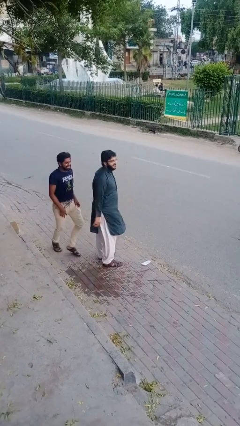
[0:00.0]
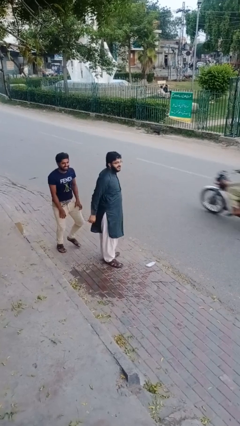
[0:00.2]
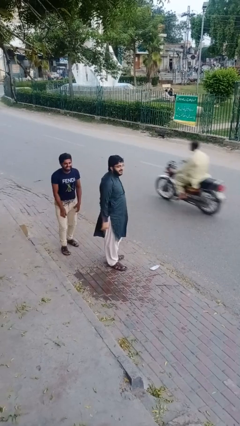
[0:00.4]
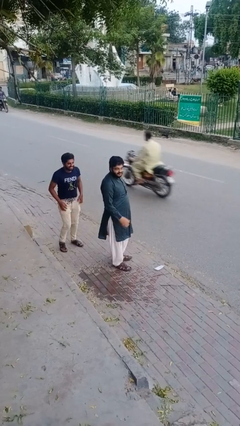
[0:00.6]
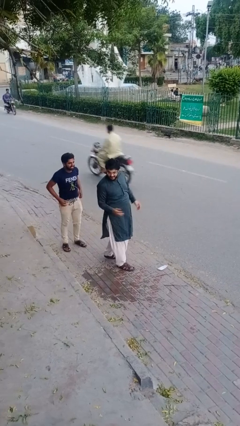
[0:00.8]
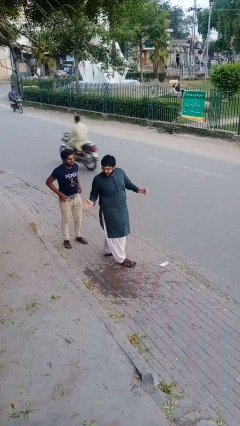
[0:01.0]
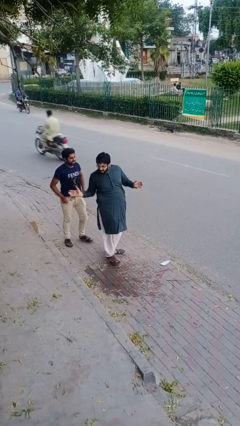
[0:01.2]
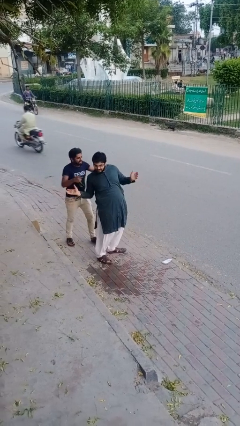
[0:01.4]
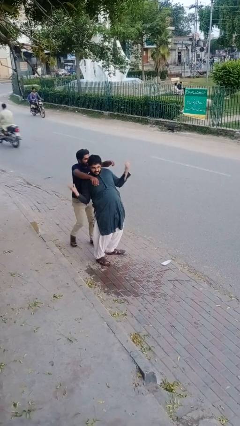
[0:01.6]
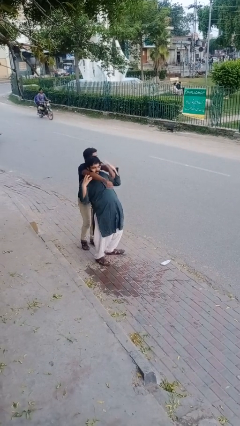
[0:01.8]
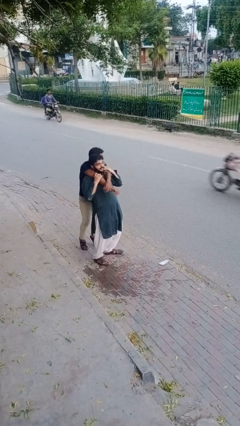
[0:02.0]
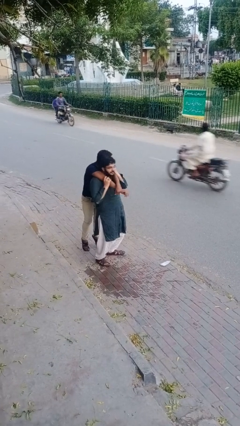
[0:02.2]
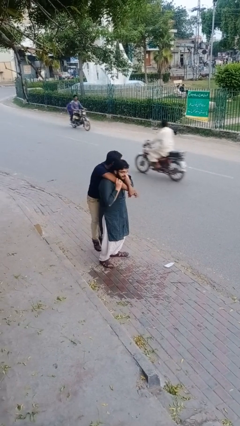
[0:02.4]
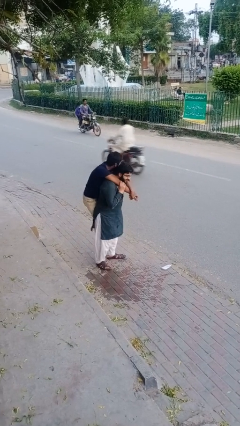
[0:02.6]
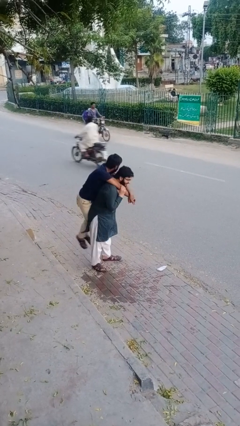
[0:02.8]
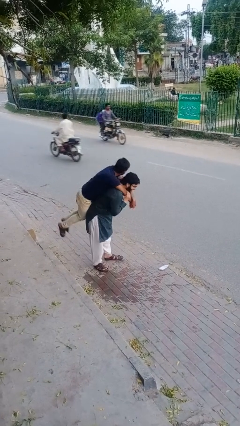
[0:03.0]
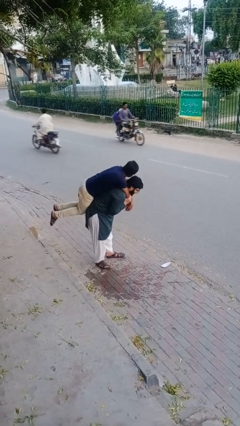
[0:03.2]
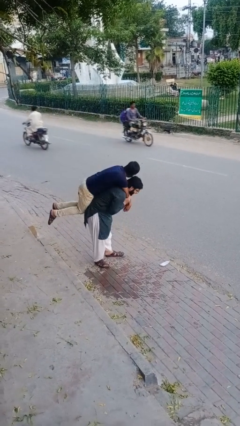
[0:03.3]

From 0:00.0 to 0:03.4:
person carries person over shoulder

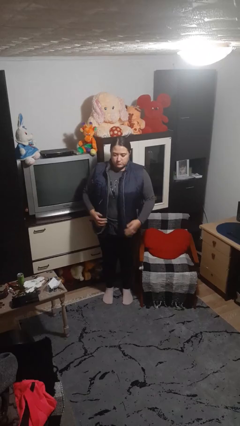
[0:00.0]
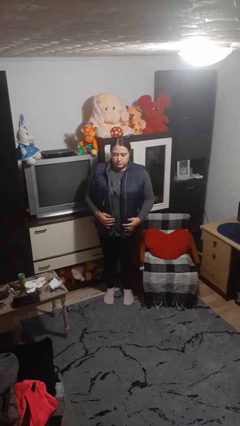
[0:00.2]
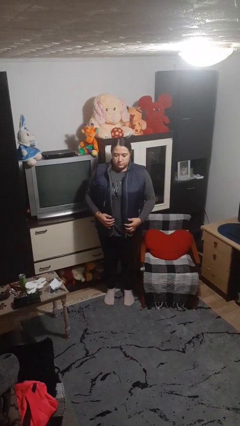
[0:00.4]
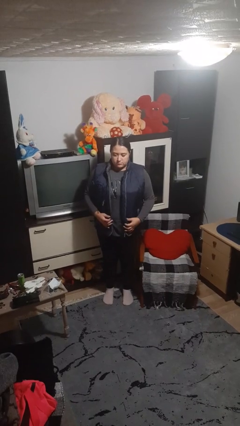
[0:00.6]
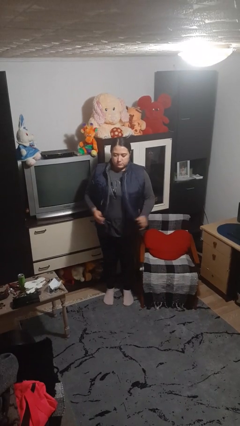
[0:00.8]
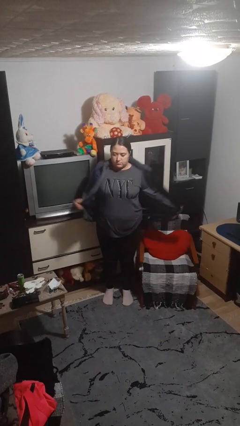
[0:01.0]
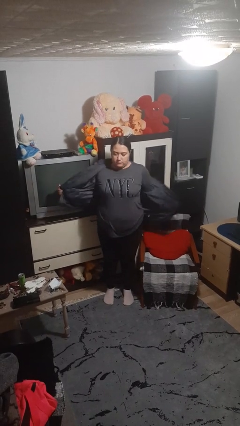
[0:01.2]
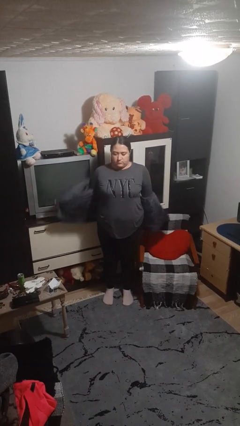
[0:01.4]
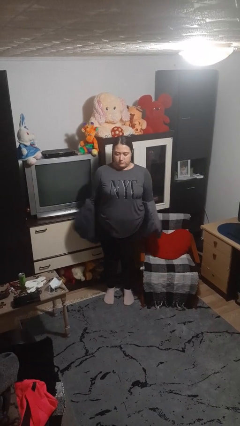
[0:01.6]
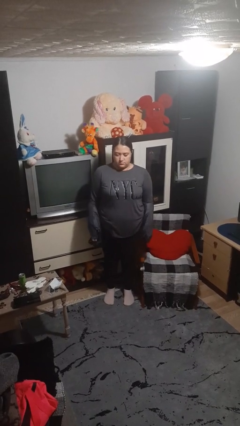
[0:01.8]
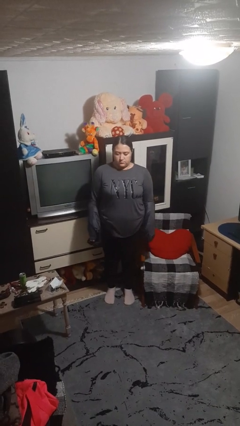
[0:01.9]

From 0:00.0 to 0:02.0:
person takes off jacket

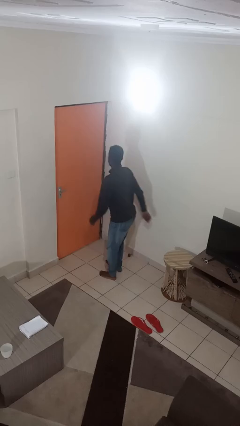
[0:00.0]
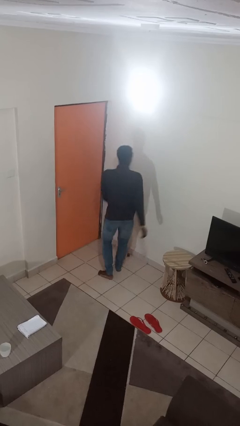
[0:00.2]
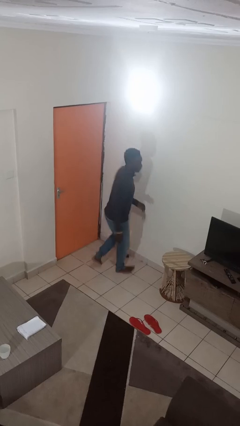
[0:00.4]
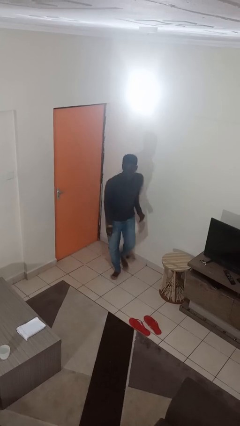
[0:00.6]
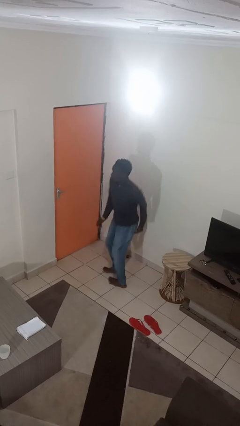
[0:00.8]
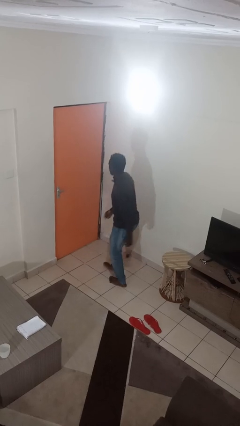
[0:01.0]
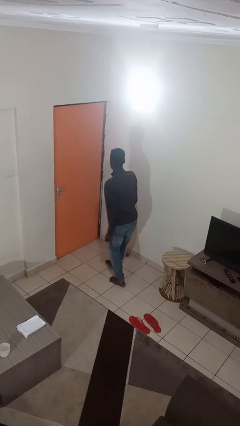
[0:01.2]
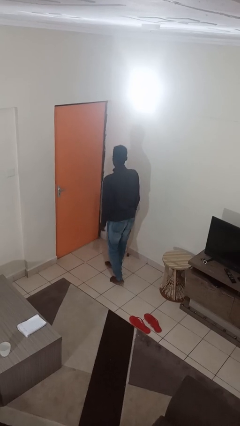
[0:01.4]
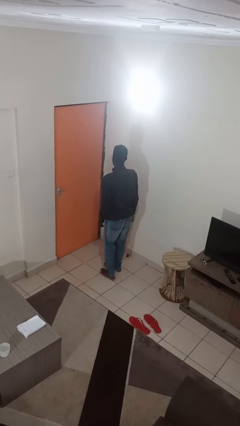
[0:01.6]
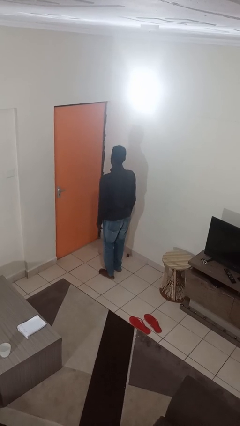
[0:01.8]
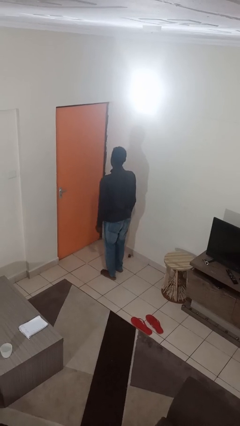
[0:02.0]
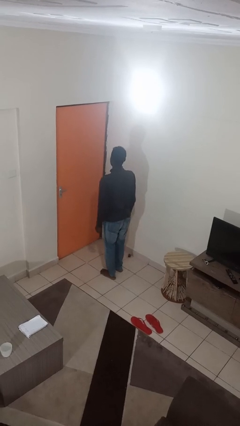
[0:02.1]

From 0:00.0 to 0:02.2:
person twirls

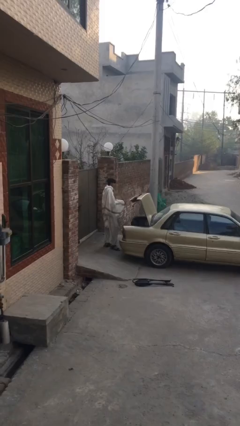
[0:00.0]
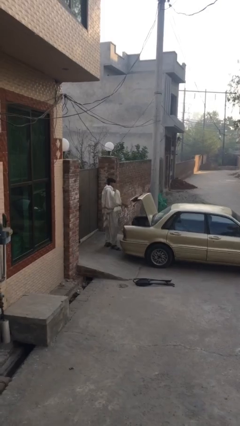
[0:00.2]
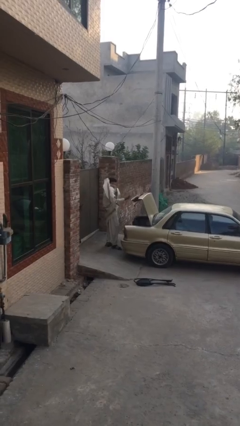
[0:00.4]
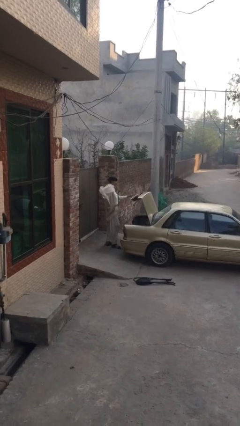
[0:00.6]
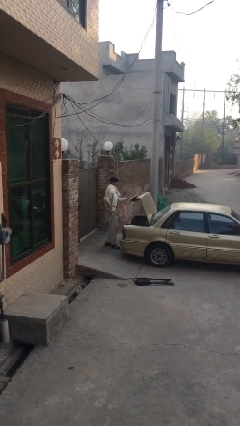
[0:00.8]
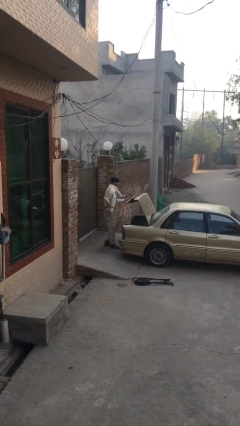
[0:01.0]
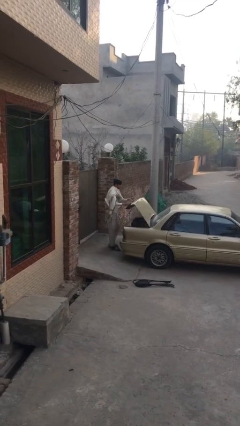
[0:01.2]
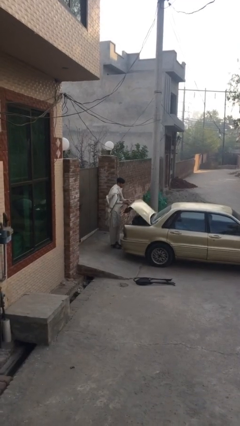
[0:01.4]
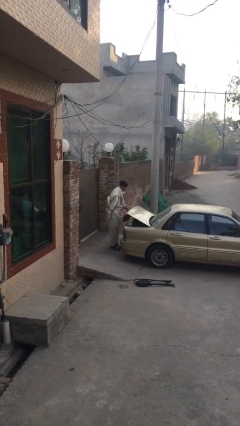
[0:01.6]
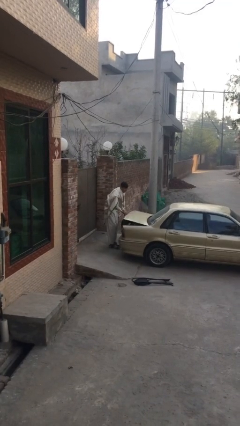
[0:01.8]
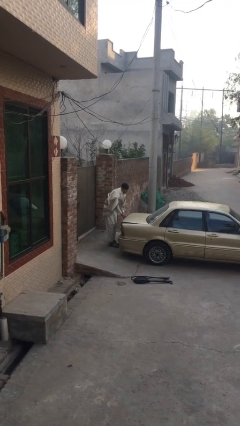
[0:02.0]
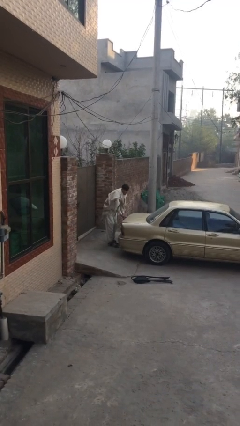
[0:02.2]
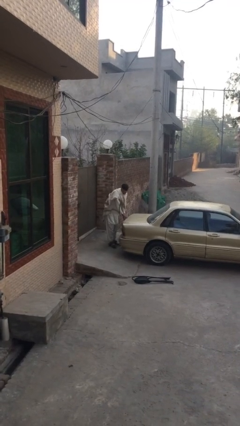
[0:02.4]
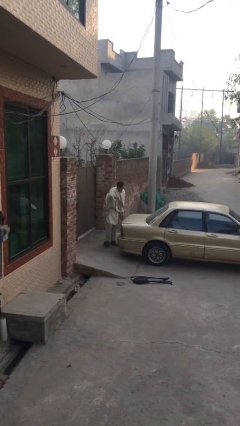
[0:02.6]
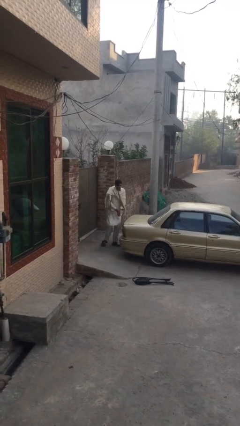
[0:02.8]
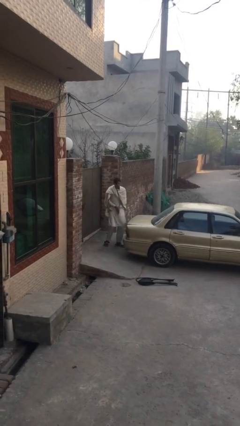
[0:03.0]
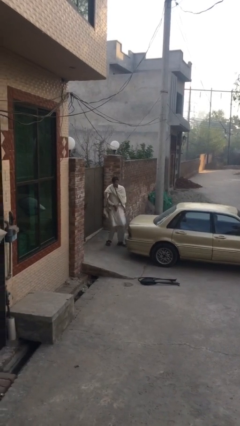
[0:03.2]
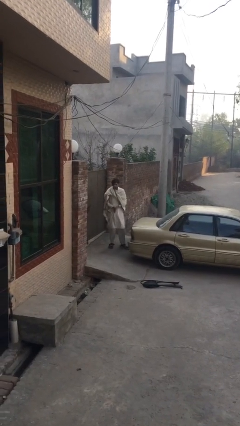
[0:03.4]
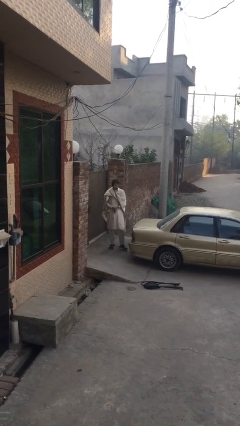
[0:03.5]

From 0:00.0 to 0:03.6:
person closes car trunk

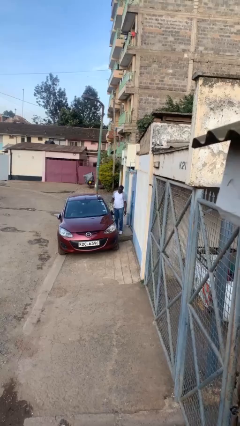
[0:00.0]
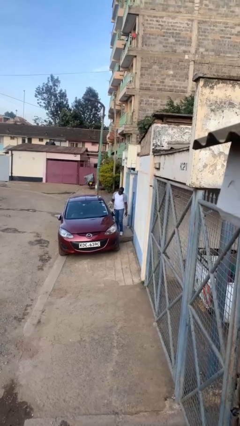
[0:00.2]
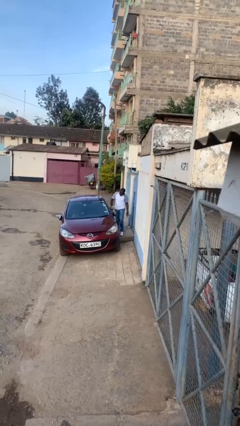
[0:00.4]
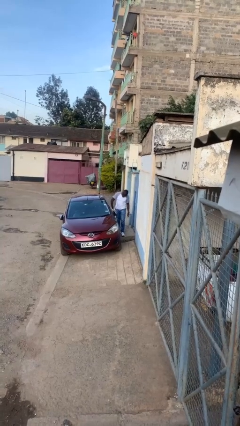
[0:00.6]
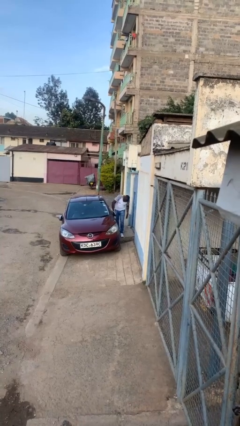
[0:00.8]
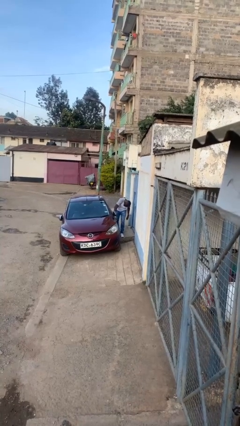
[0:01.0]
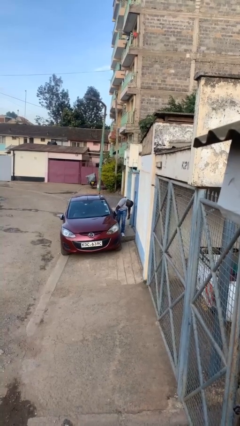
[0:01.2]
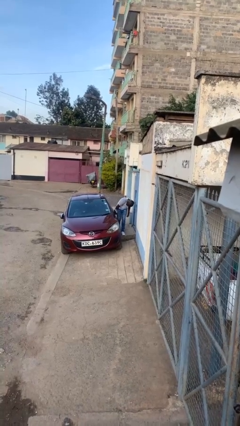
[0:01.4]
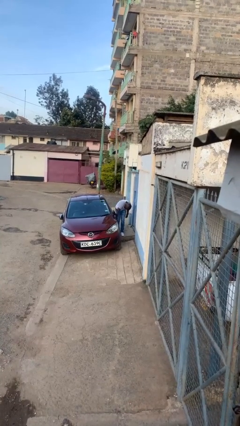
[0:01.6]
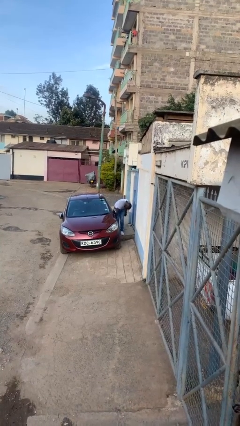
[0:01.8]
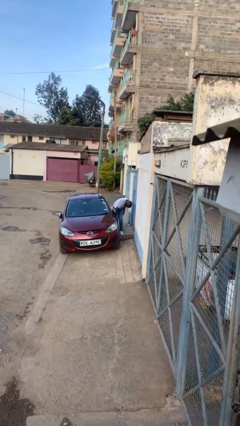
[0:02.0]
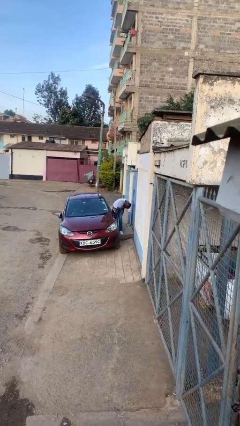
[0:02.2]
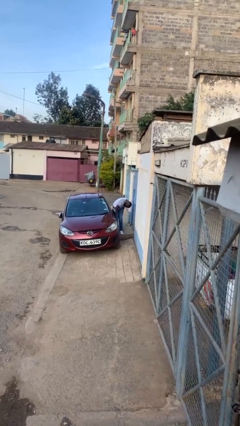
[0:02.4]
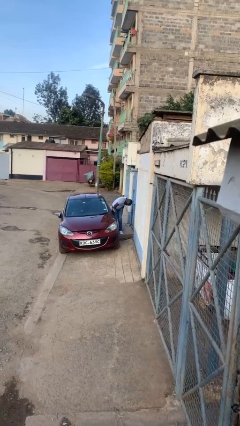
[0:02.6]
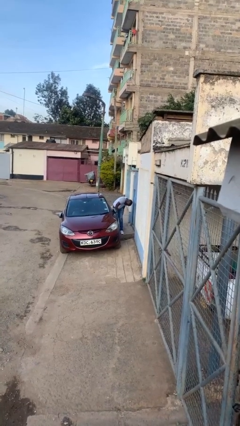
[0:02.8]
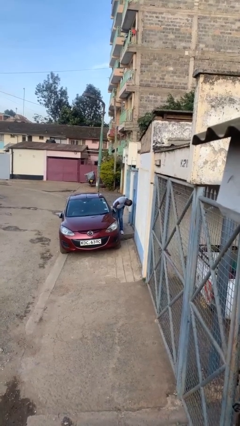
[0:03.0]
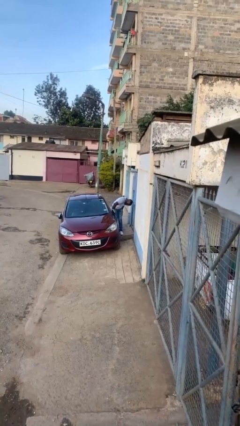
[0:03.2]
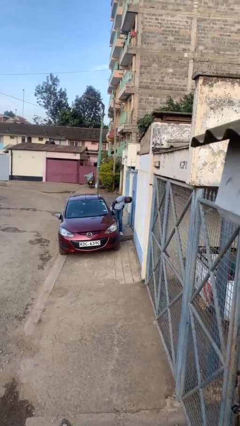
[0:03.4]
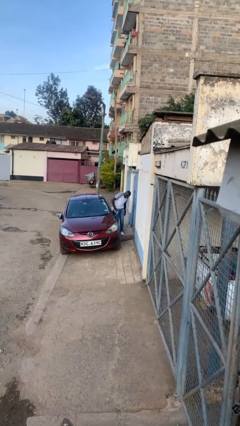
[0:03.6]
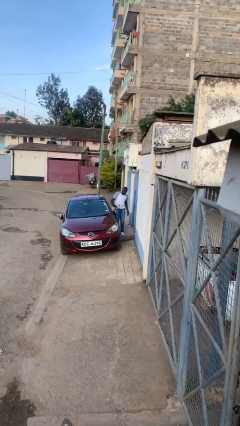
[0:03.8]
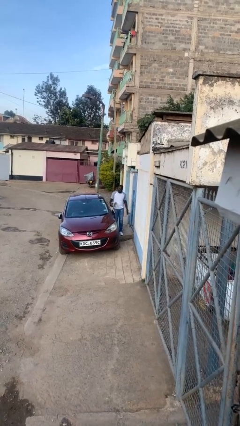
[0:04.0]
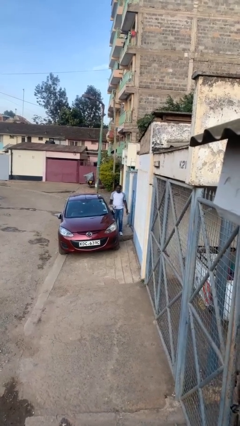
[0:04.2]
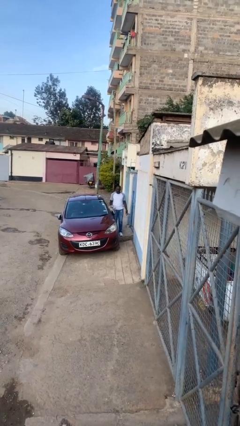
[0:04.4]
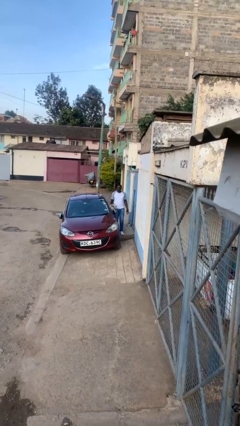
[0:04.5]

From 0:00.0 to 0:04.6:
person polishes car with rag

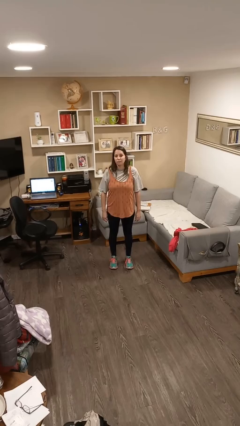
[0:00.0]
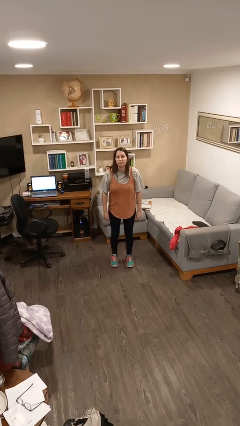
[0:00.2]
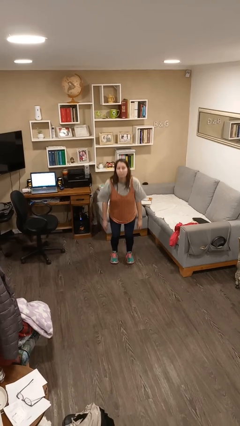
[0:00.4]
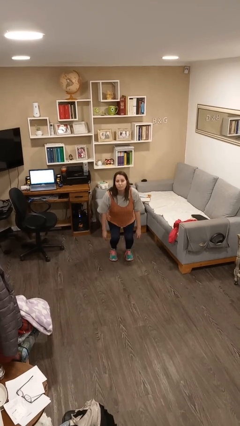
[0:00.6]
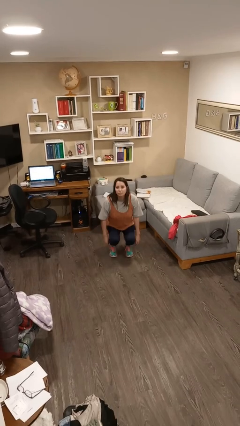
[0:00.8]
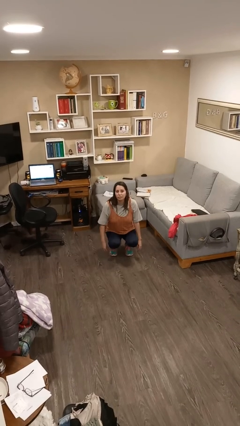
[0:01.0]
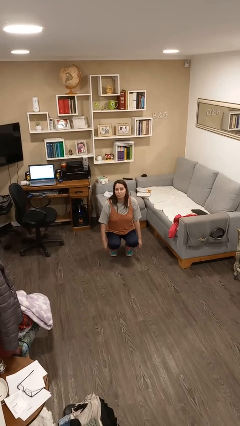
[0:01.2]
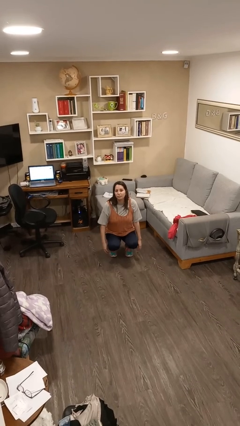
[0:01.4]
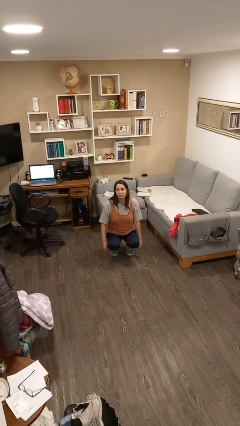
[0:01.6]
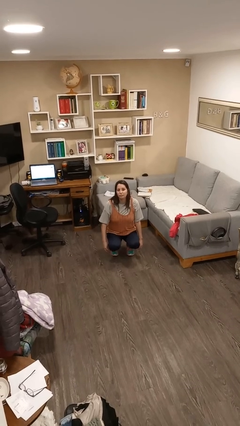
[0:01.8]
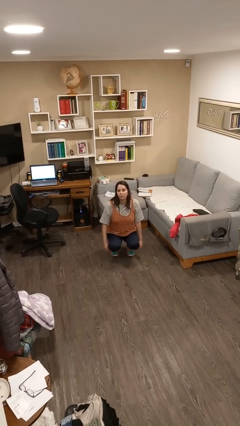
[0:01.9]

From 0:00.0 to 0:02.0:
person squats
